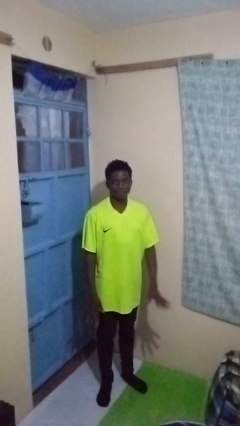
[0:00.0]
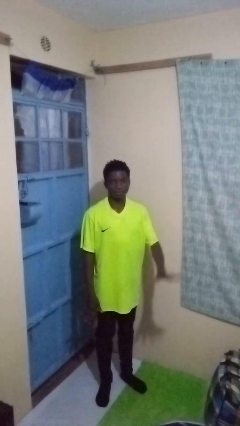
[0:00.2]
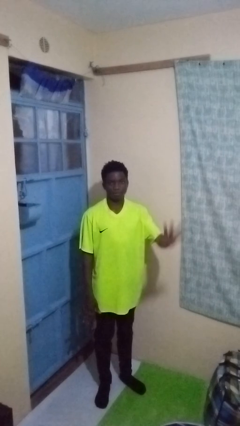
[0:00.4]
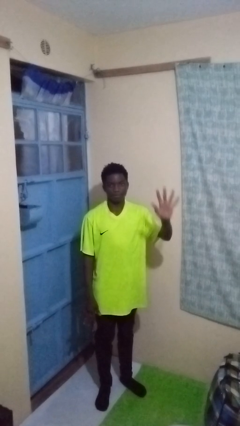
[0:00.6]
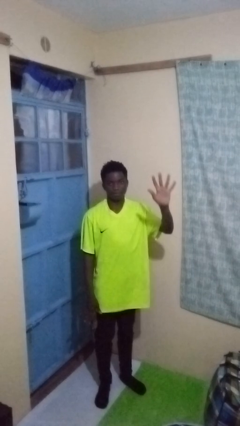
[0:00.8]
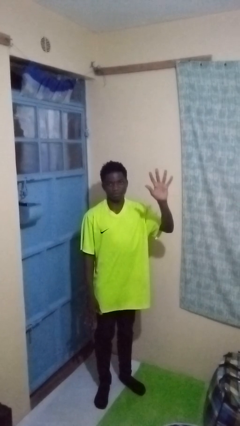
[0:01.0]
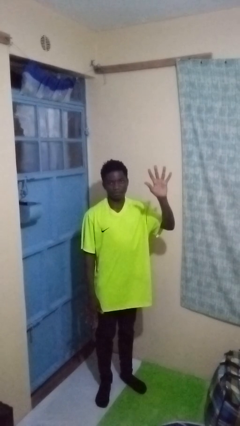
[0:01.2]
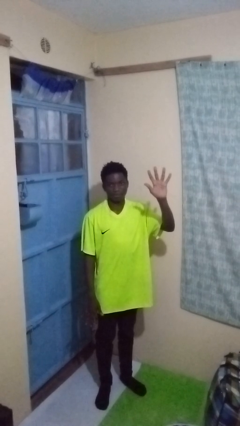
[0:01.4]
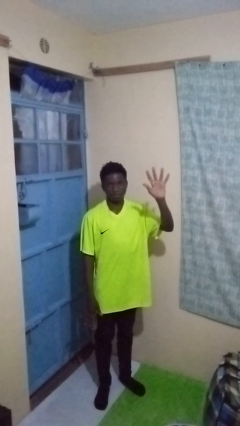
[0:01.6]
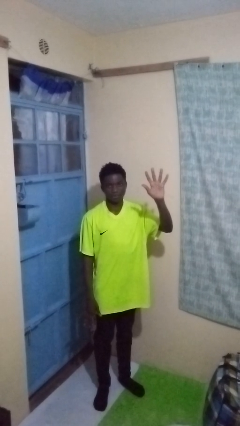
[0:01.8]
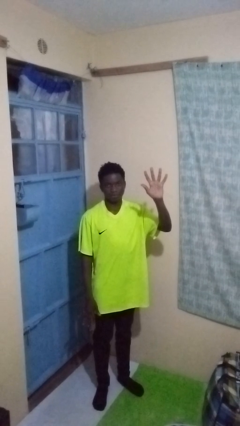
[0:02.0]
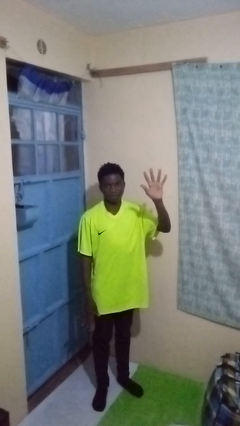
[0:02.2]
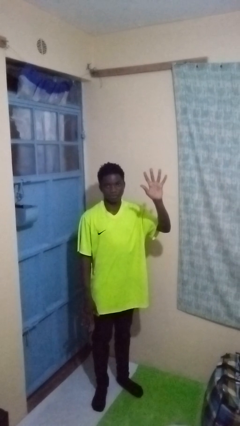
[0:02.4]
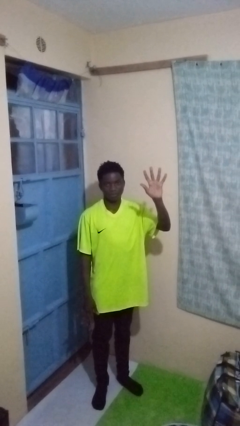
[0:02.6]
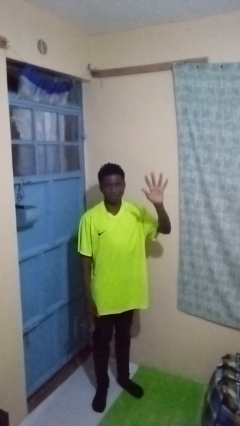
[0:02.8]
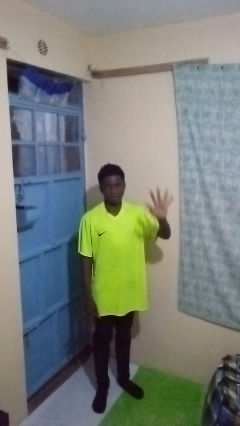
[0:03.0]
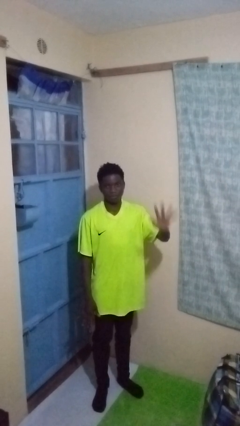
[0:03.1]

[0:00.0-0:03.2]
person gestures number five

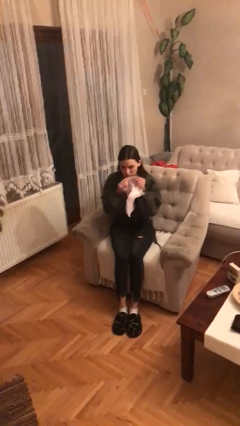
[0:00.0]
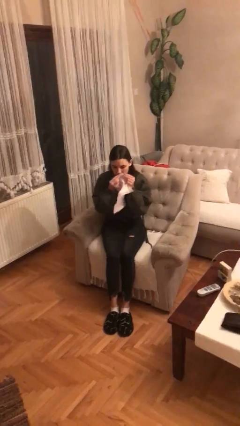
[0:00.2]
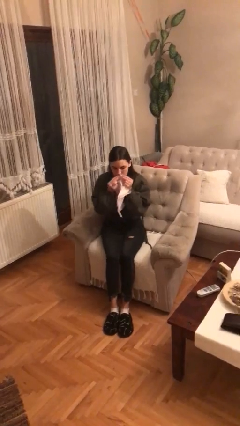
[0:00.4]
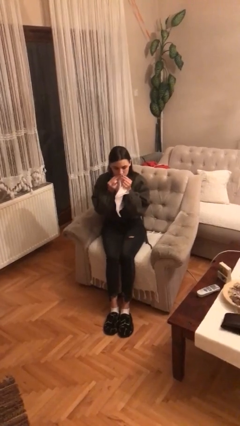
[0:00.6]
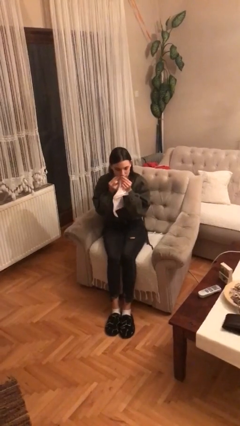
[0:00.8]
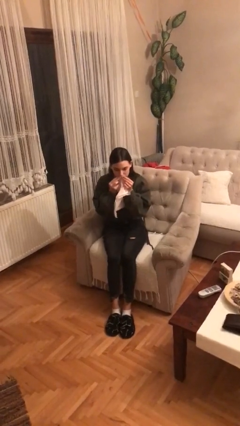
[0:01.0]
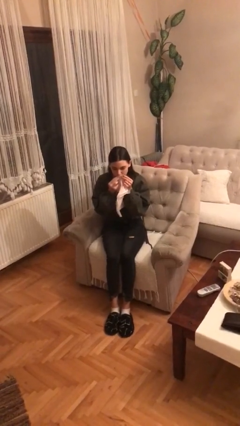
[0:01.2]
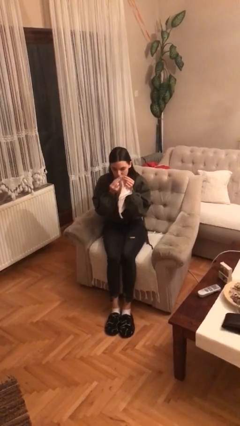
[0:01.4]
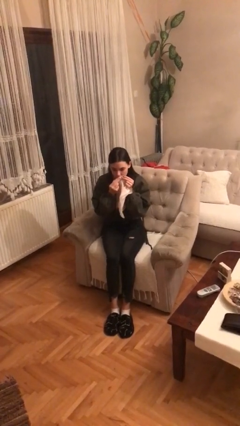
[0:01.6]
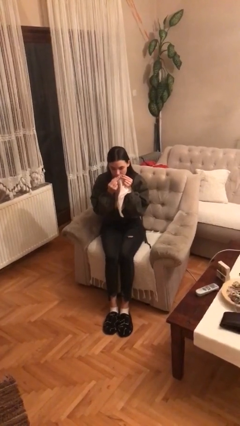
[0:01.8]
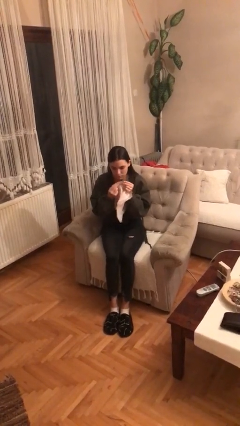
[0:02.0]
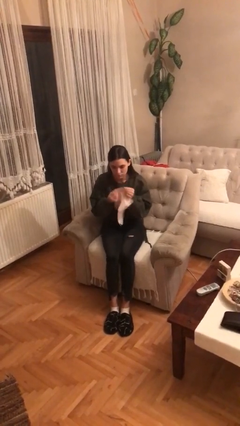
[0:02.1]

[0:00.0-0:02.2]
person wipes mouth with napkin

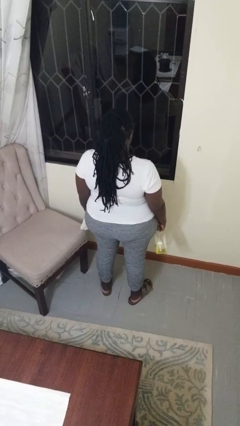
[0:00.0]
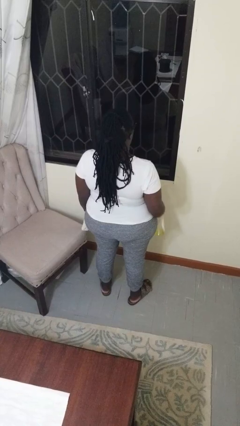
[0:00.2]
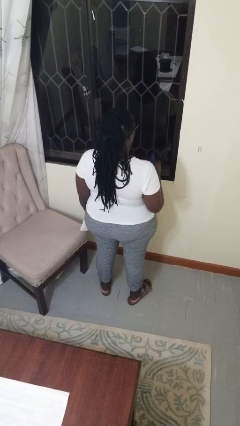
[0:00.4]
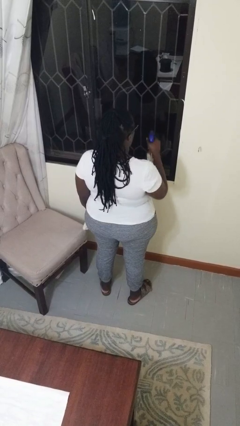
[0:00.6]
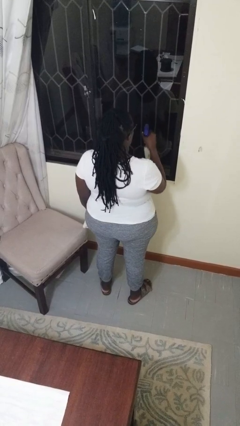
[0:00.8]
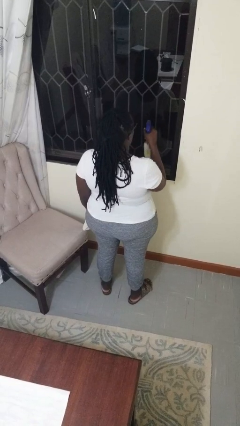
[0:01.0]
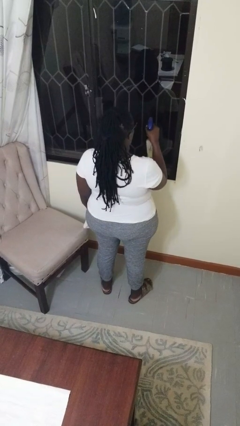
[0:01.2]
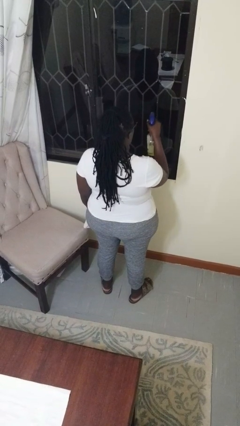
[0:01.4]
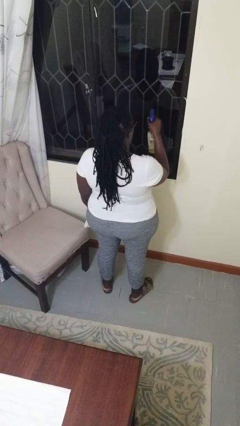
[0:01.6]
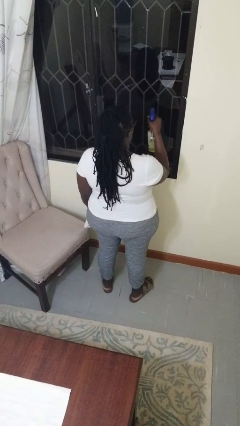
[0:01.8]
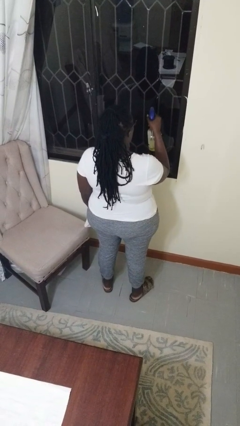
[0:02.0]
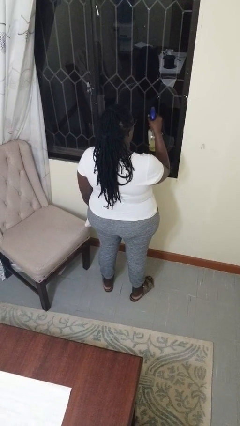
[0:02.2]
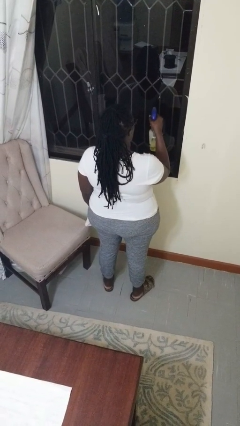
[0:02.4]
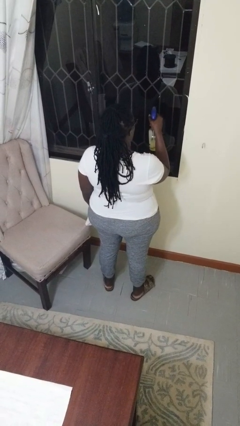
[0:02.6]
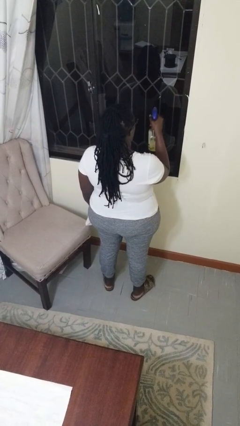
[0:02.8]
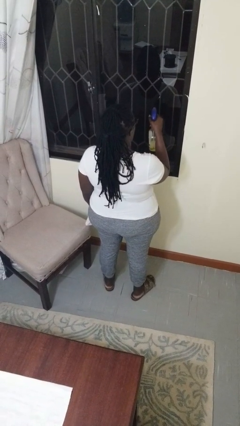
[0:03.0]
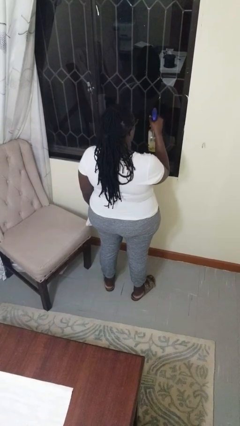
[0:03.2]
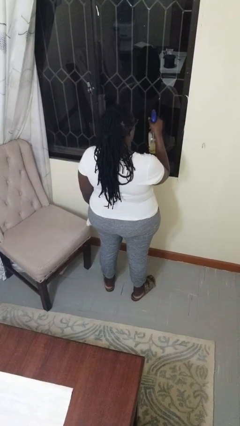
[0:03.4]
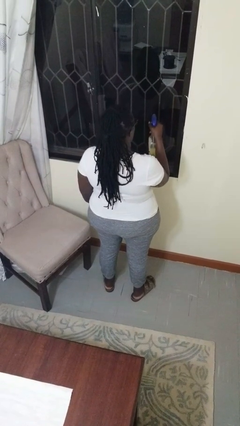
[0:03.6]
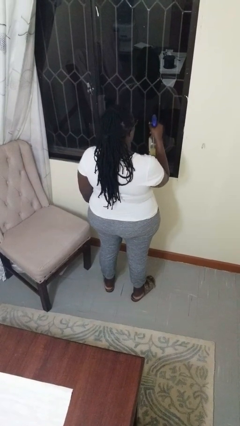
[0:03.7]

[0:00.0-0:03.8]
person sprays from bottle

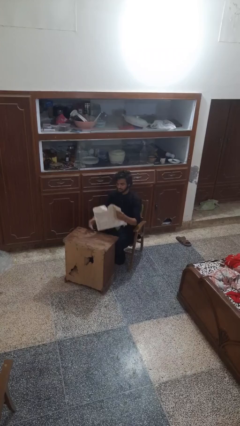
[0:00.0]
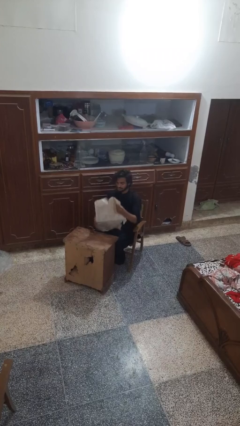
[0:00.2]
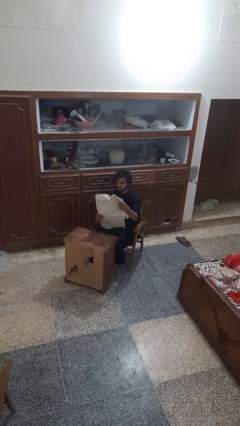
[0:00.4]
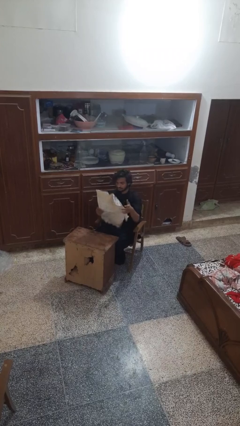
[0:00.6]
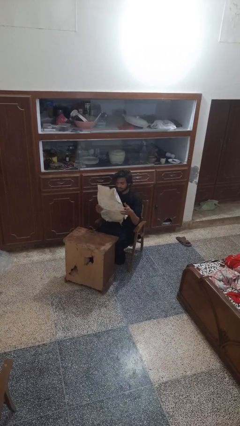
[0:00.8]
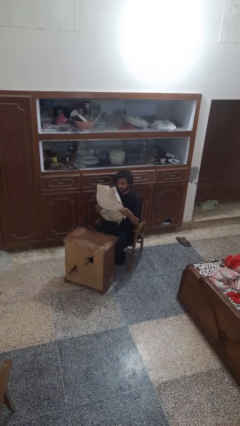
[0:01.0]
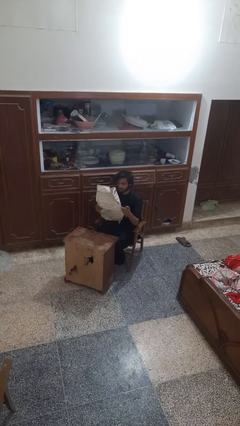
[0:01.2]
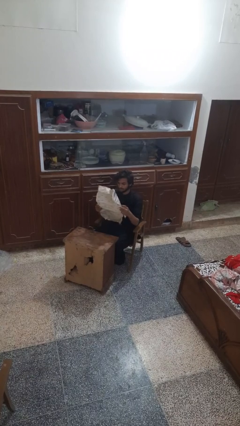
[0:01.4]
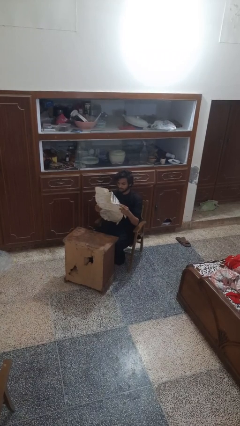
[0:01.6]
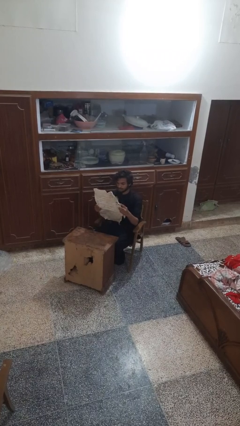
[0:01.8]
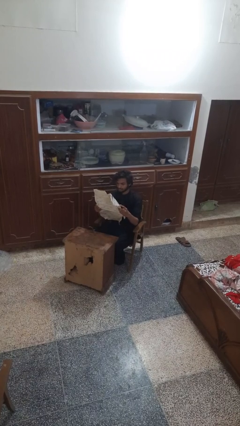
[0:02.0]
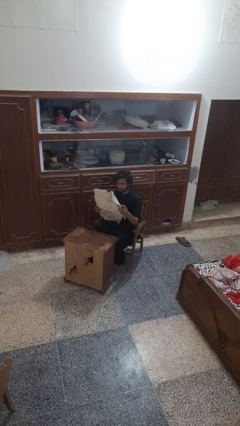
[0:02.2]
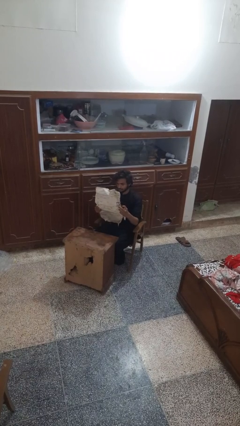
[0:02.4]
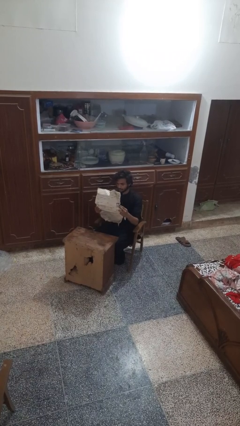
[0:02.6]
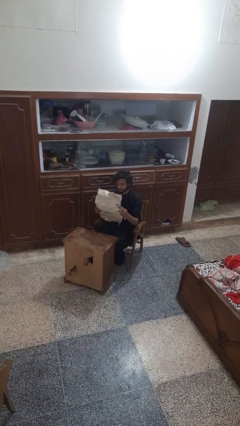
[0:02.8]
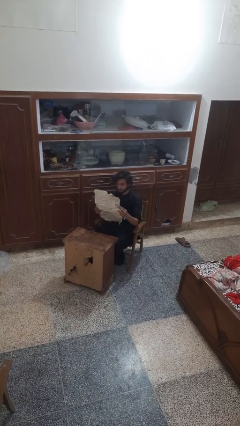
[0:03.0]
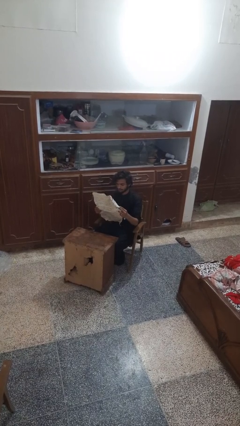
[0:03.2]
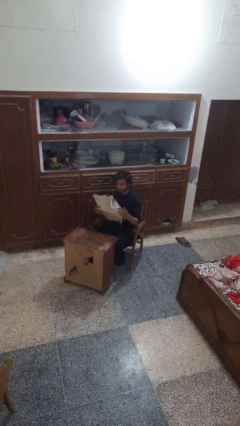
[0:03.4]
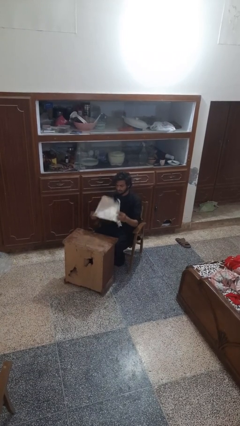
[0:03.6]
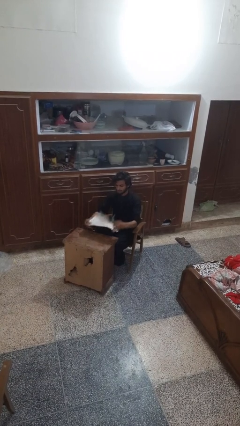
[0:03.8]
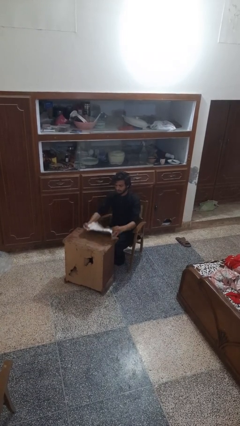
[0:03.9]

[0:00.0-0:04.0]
person reads newspaper

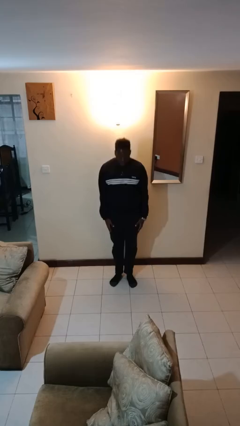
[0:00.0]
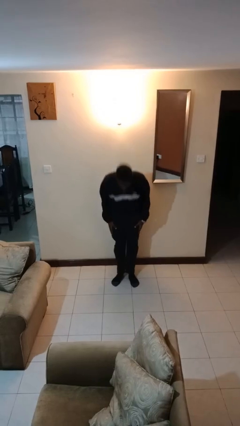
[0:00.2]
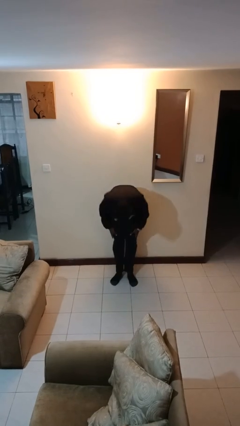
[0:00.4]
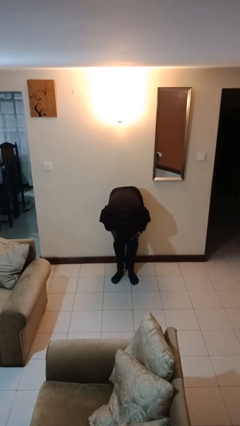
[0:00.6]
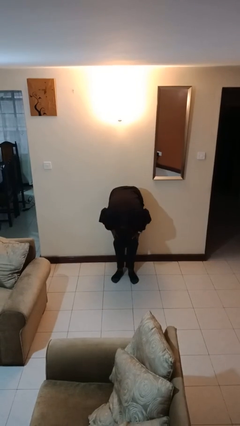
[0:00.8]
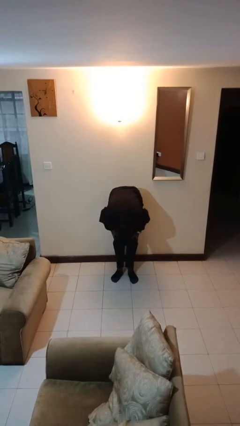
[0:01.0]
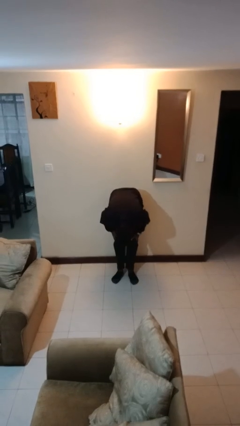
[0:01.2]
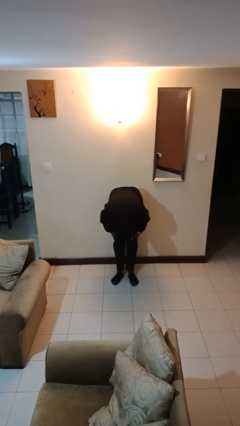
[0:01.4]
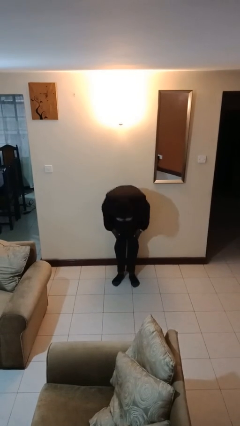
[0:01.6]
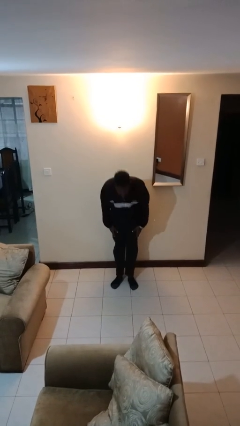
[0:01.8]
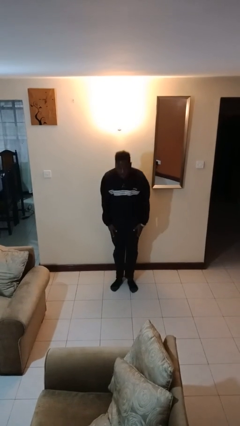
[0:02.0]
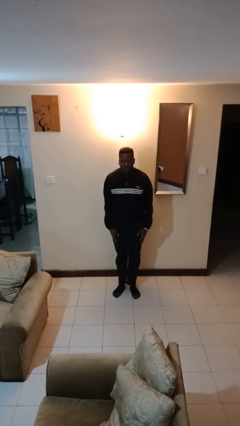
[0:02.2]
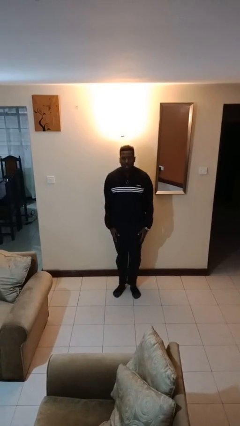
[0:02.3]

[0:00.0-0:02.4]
person bows

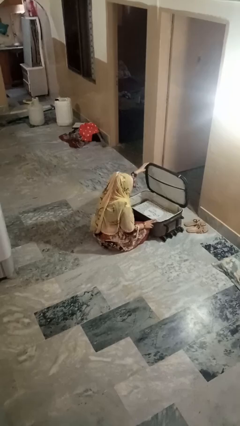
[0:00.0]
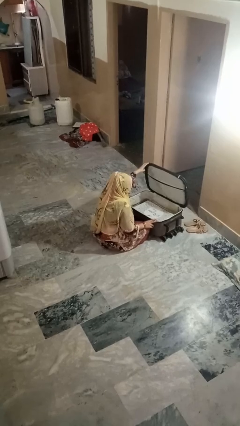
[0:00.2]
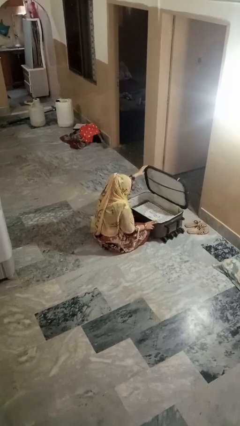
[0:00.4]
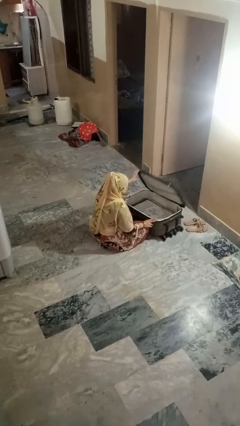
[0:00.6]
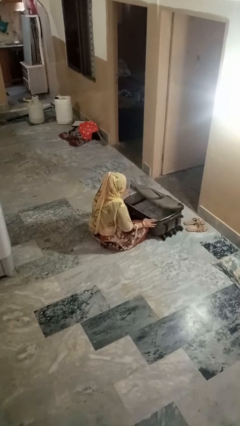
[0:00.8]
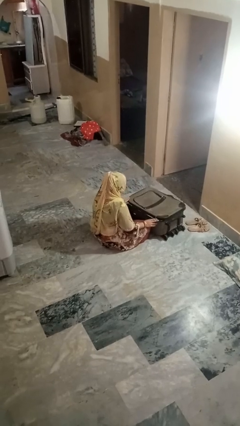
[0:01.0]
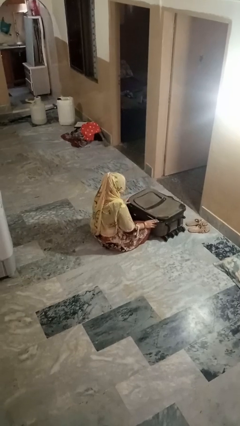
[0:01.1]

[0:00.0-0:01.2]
person closes suitcase

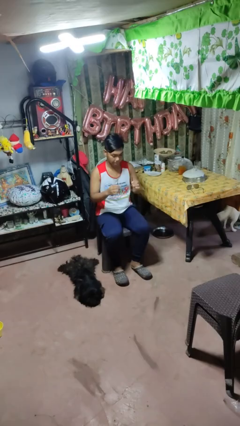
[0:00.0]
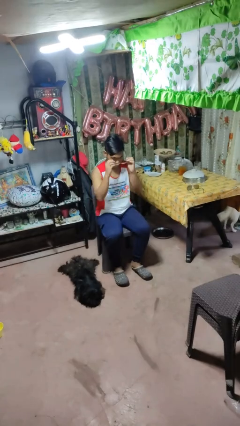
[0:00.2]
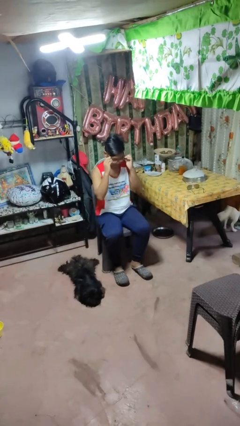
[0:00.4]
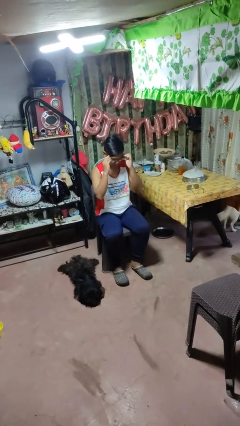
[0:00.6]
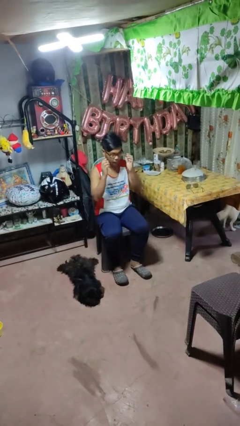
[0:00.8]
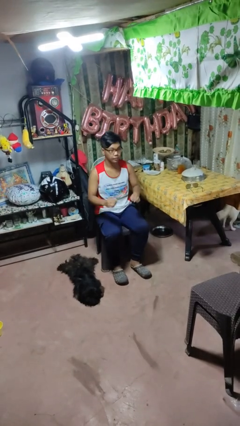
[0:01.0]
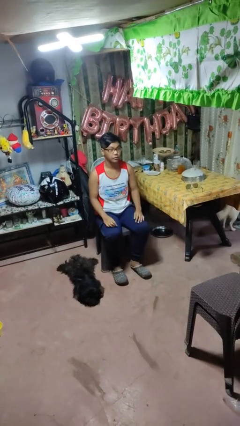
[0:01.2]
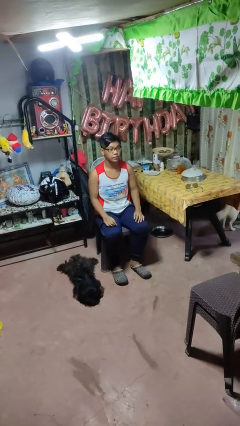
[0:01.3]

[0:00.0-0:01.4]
person puts on glasses
